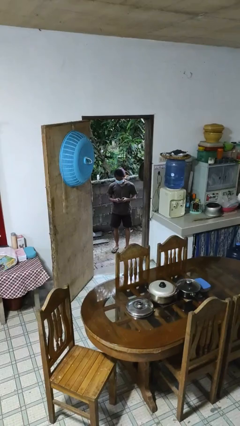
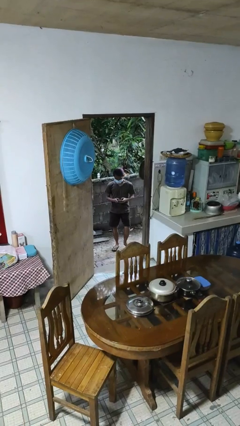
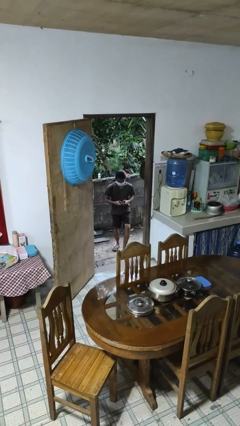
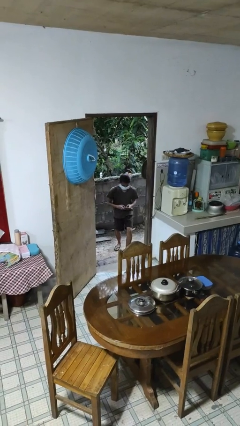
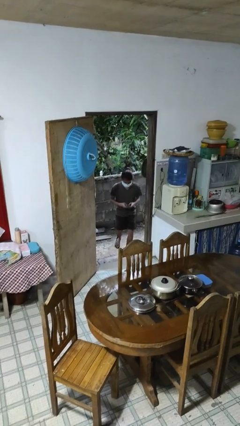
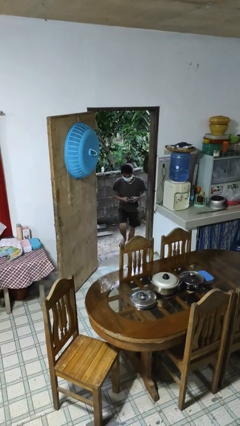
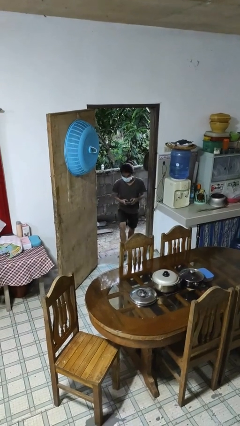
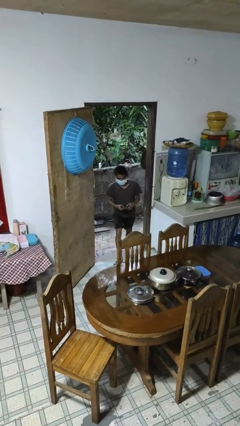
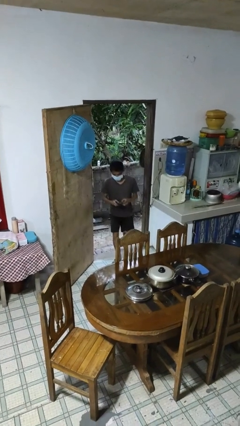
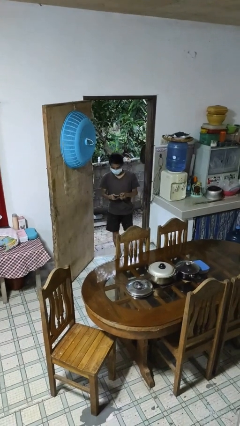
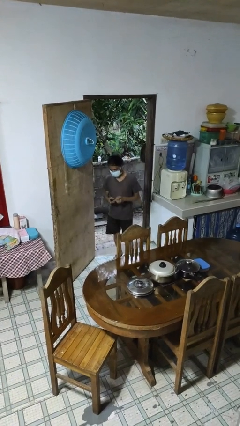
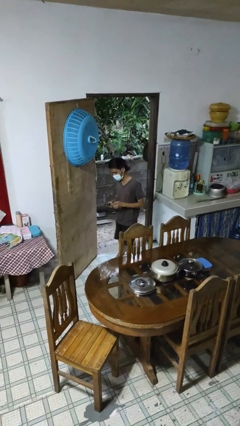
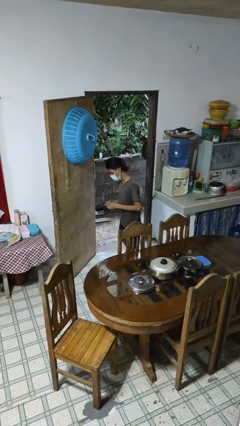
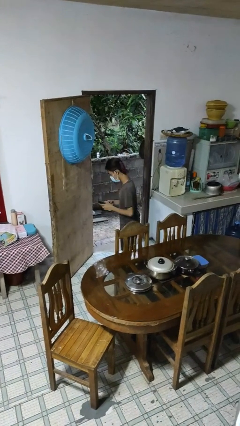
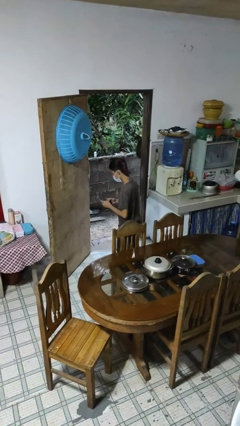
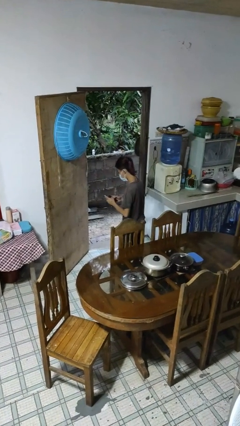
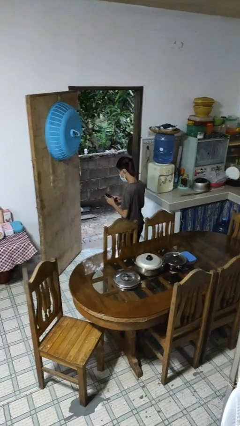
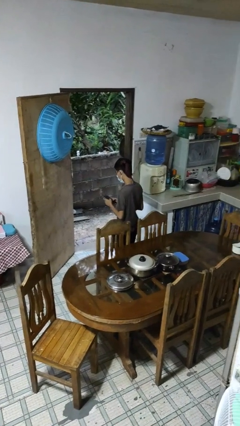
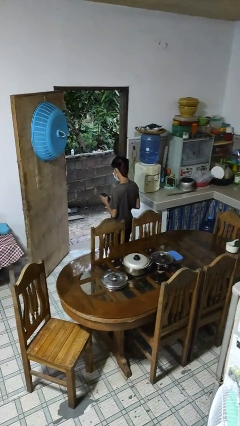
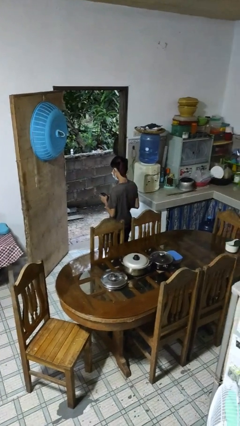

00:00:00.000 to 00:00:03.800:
person enters scene through structure

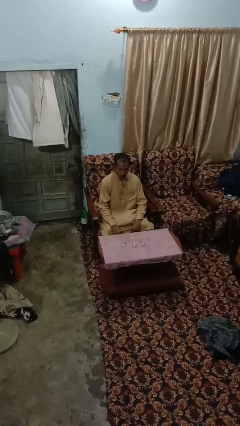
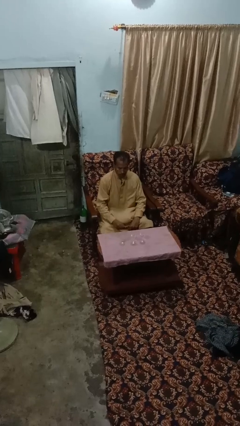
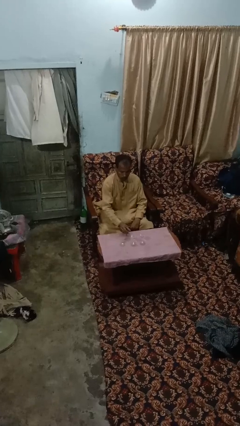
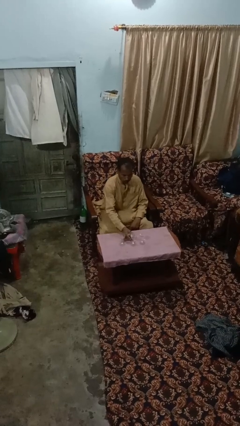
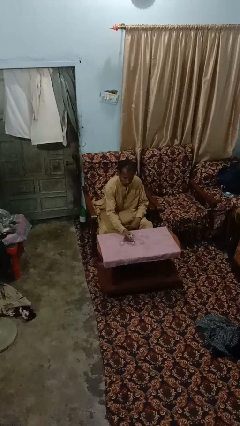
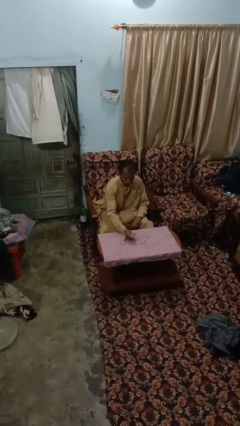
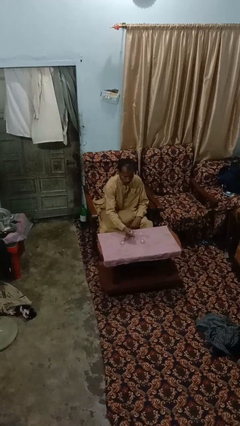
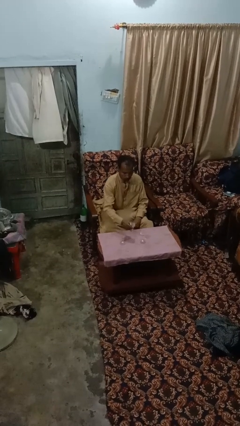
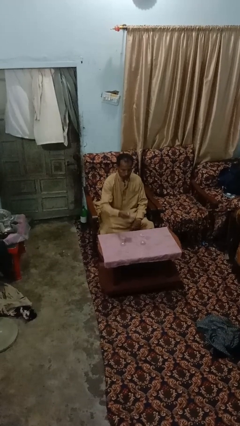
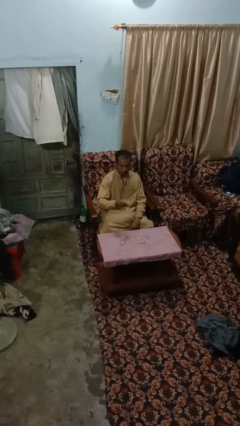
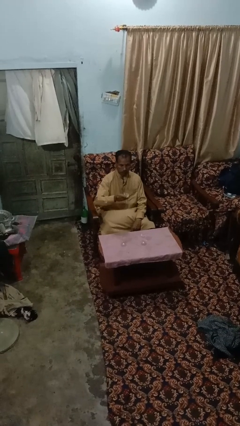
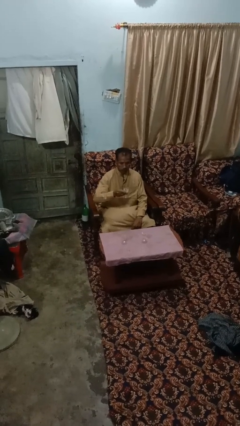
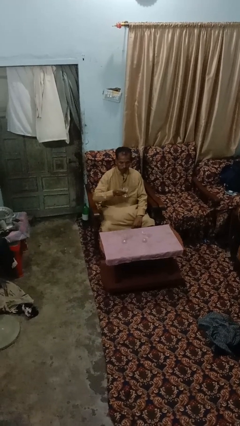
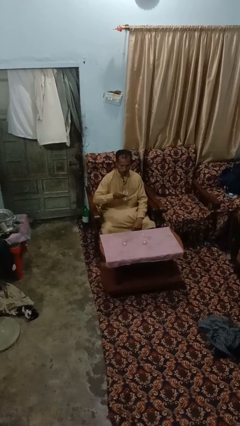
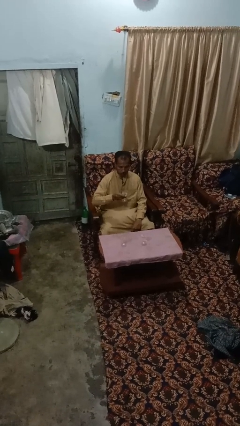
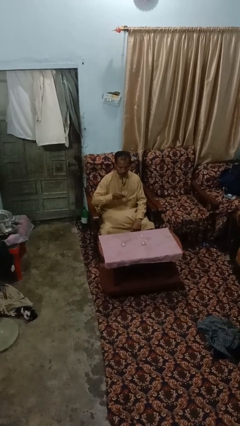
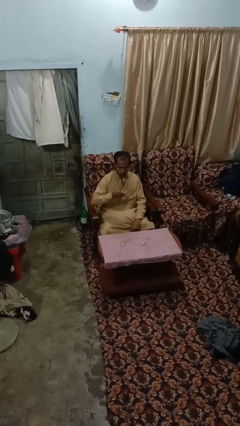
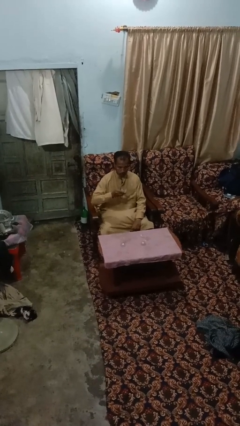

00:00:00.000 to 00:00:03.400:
person picks up object from table

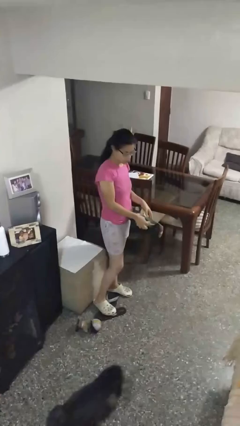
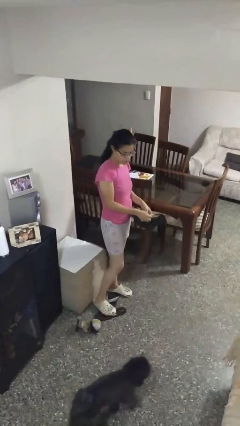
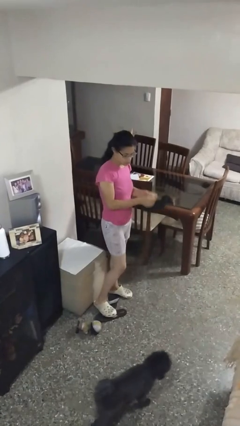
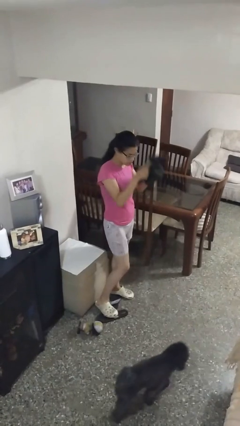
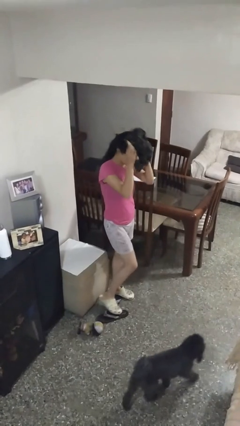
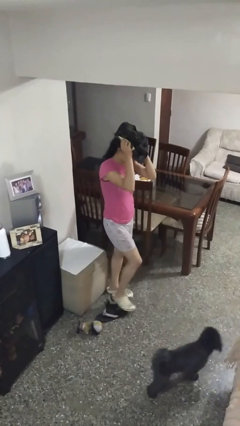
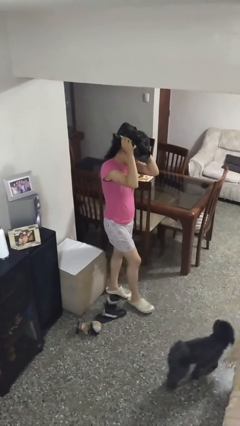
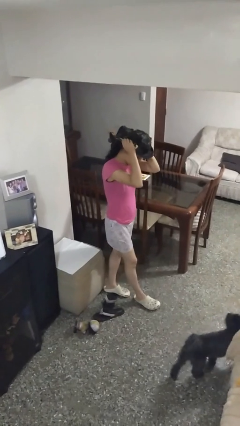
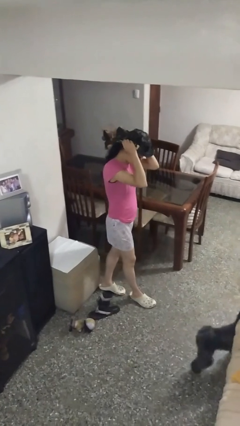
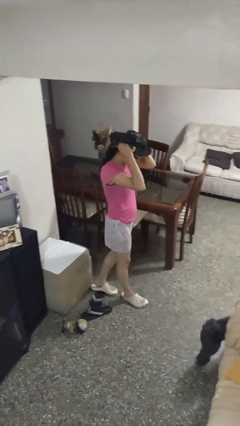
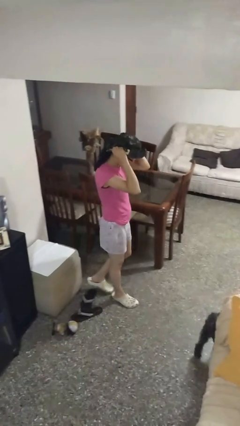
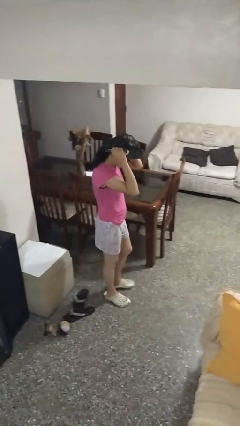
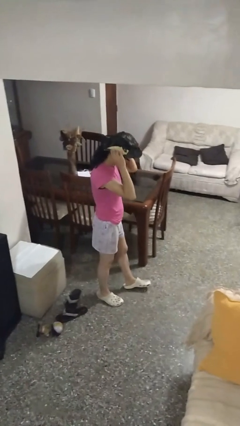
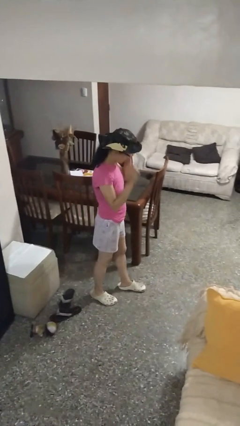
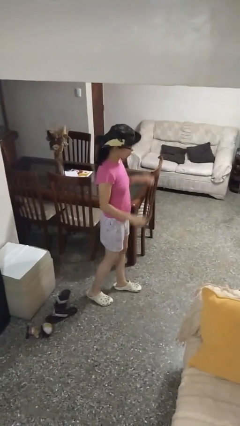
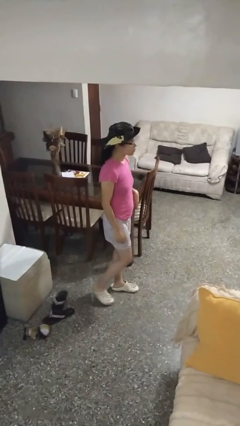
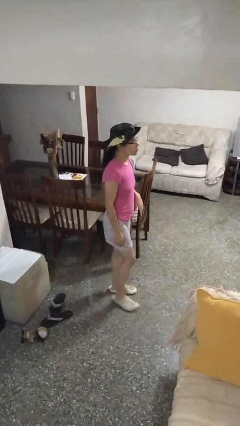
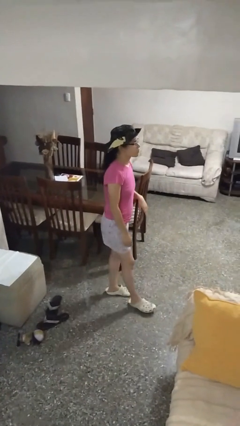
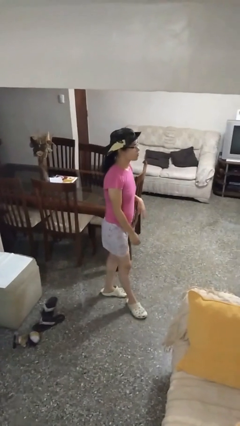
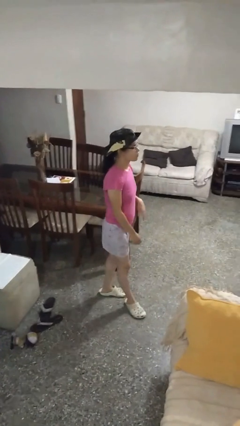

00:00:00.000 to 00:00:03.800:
person puts on hat

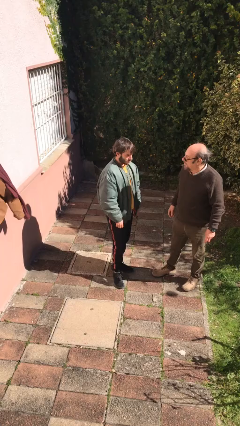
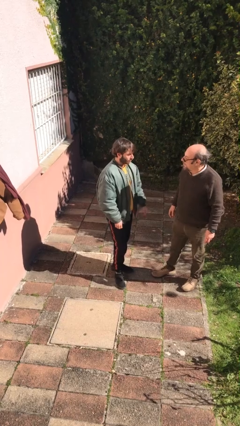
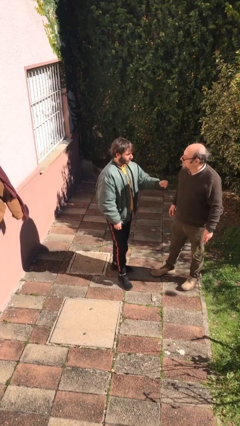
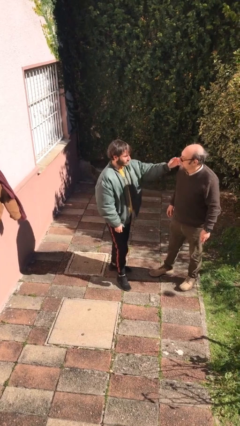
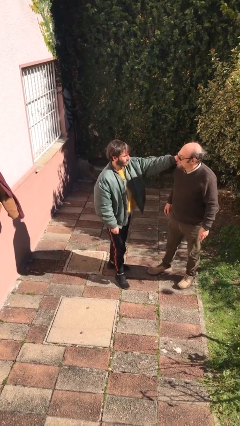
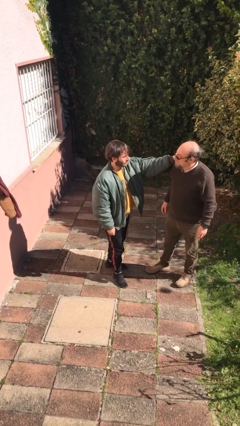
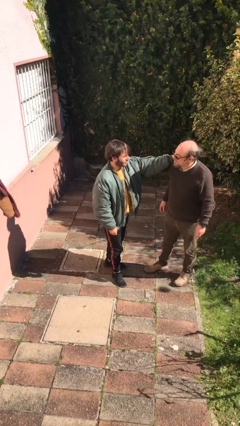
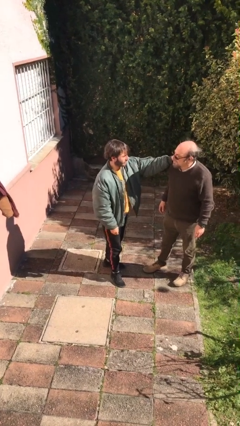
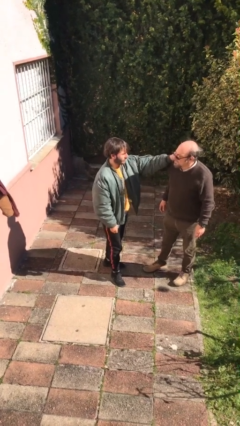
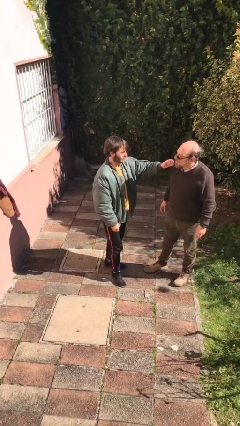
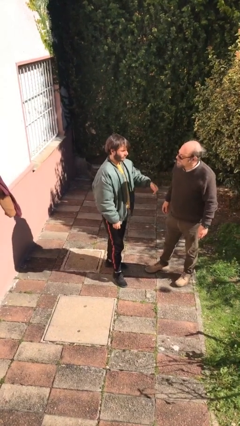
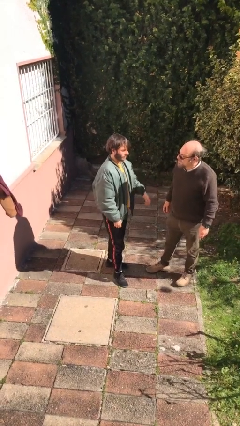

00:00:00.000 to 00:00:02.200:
person touches face of person

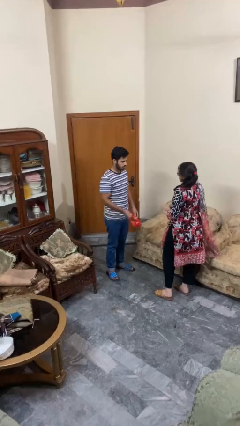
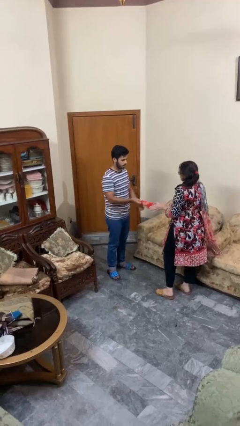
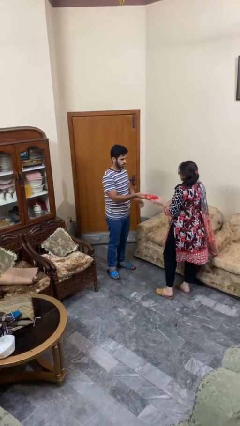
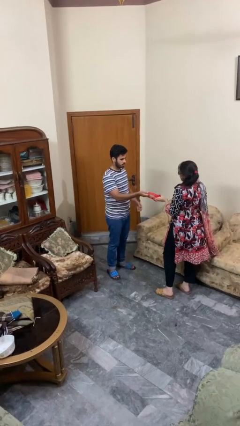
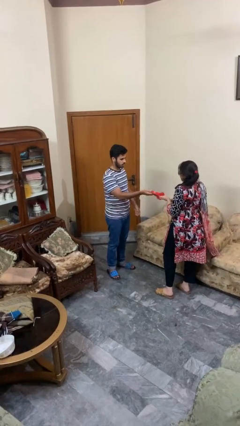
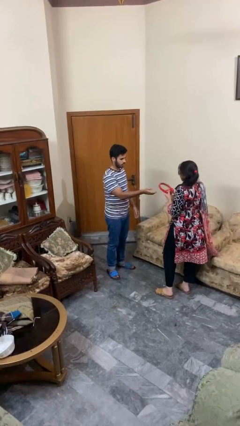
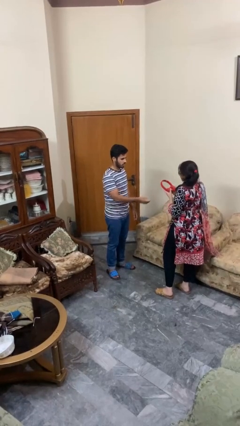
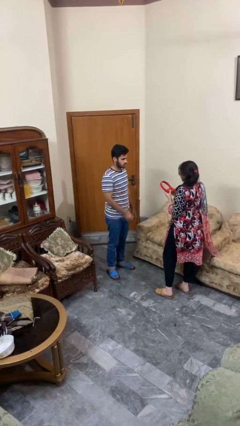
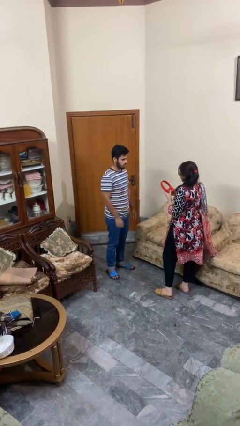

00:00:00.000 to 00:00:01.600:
person transfers object to person

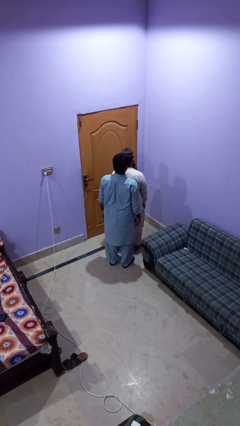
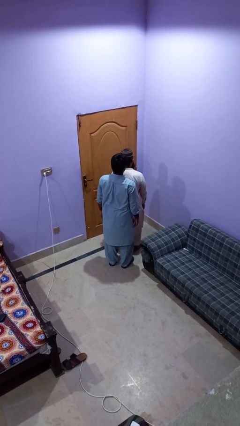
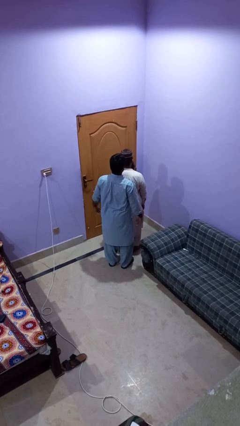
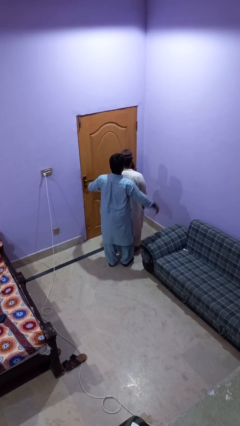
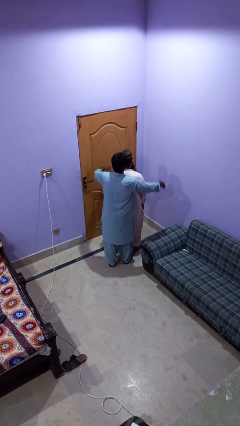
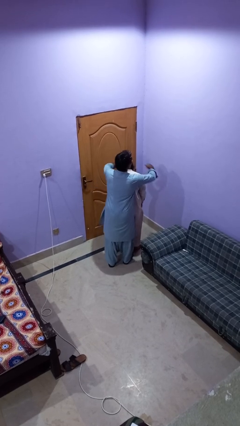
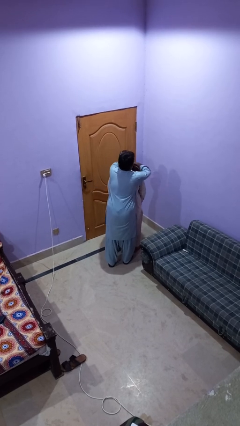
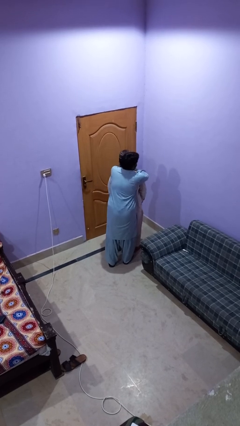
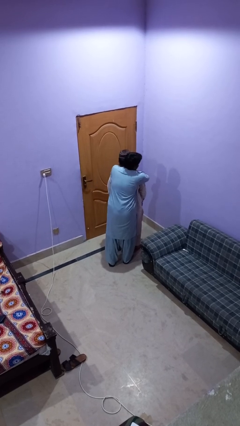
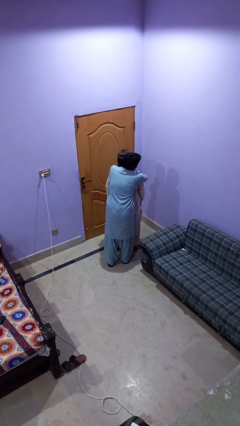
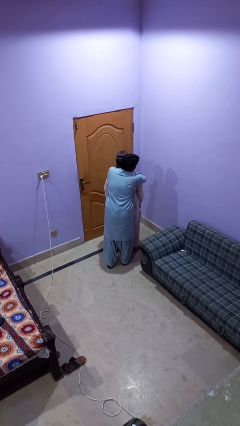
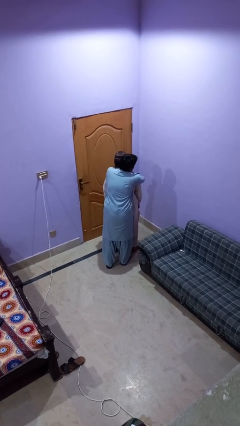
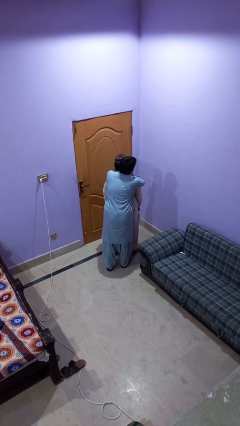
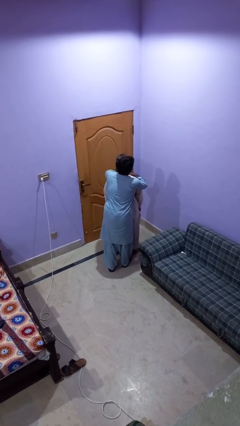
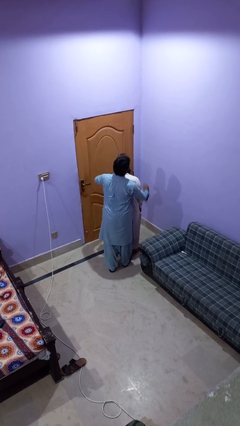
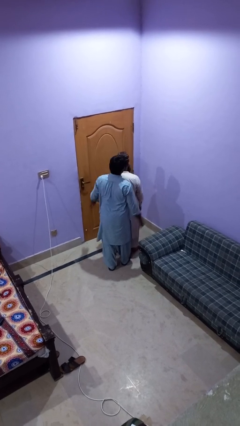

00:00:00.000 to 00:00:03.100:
person hugs person from behind
